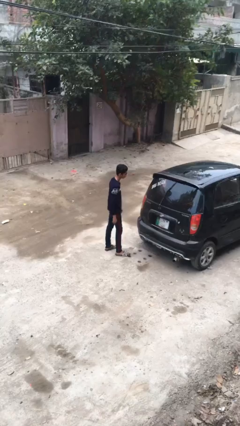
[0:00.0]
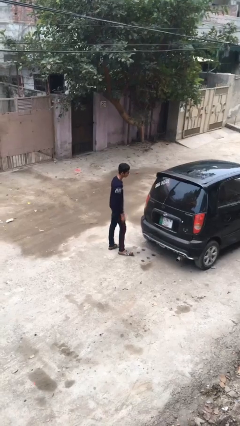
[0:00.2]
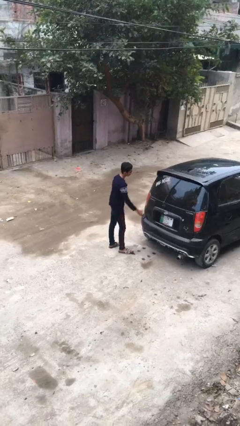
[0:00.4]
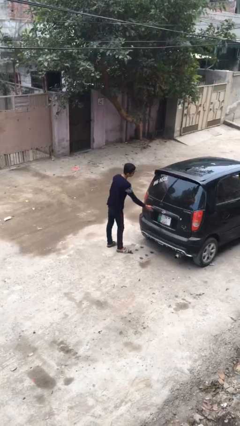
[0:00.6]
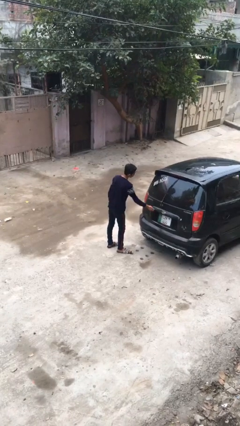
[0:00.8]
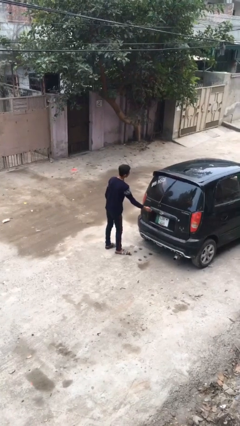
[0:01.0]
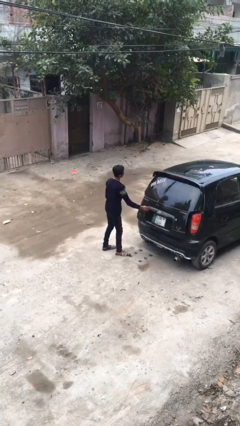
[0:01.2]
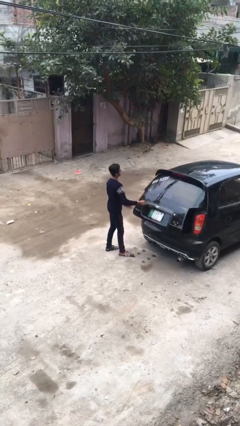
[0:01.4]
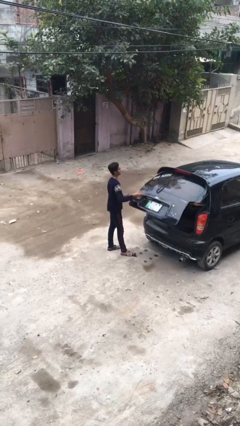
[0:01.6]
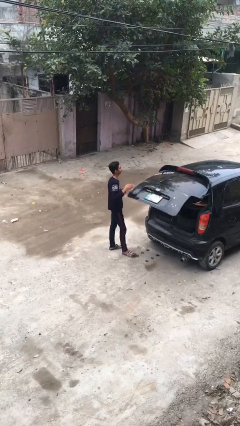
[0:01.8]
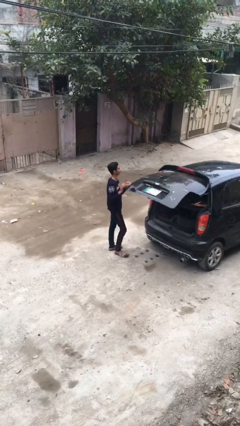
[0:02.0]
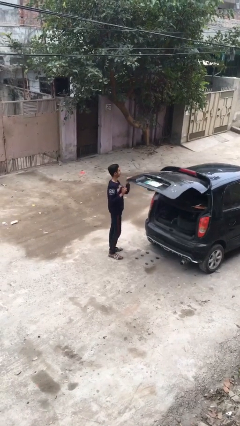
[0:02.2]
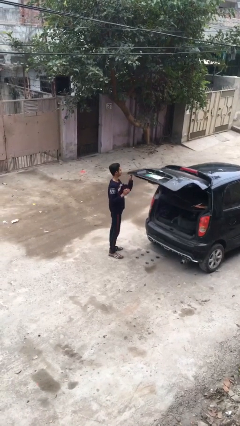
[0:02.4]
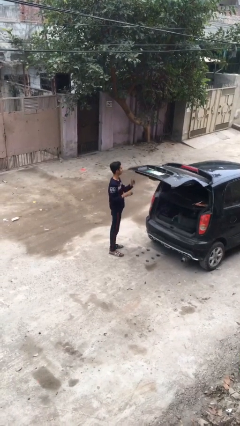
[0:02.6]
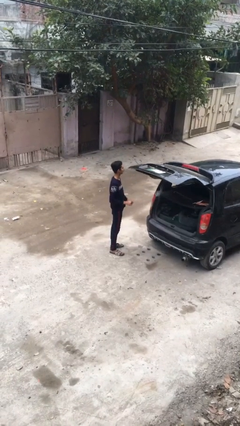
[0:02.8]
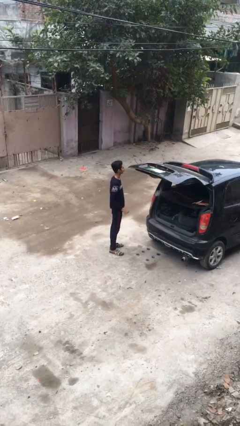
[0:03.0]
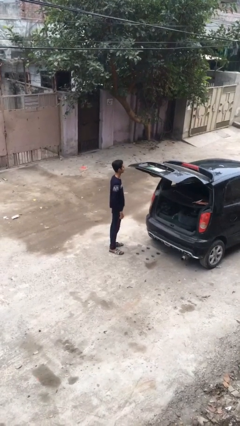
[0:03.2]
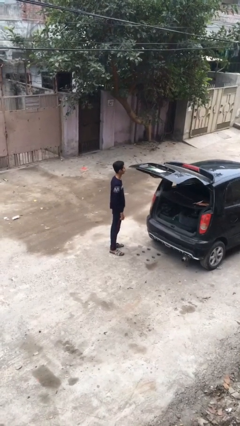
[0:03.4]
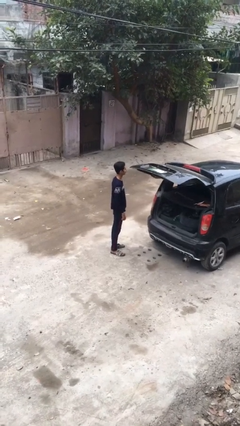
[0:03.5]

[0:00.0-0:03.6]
person opens car trunk

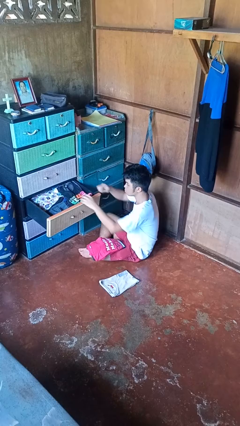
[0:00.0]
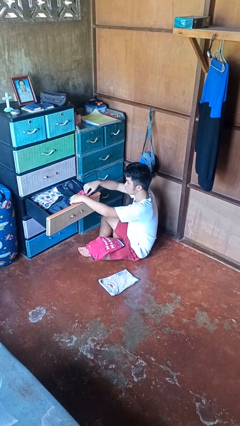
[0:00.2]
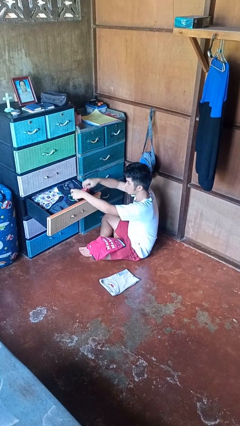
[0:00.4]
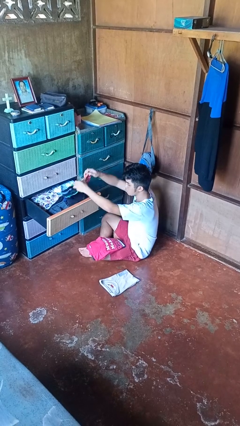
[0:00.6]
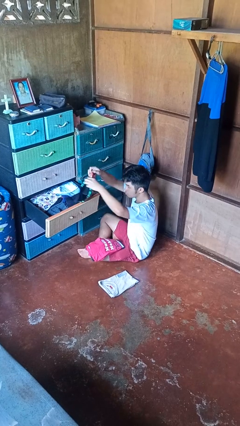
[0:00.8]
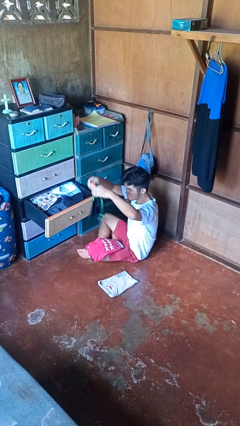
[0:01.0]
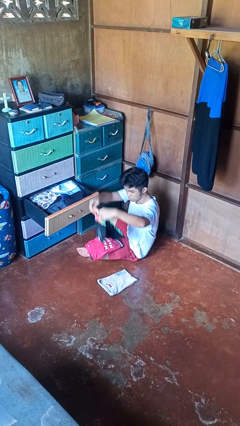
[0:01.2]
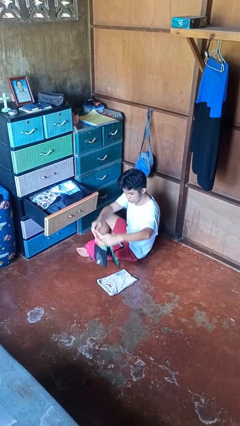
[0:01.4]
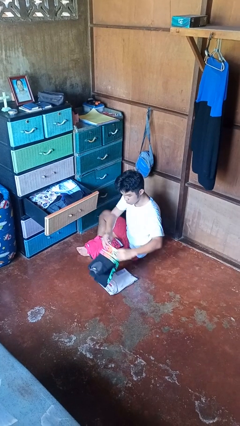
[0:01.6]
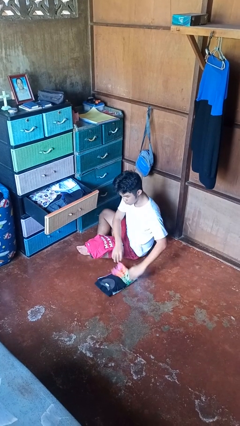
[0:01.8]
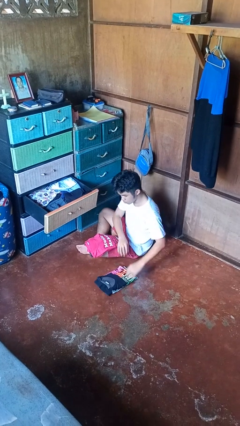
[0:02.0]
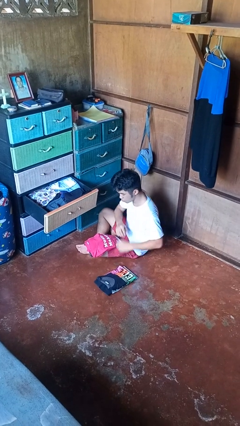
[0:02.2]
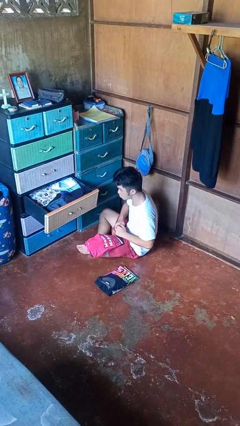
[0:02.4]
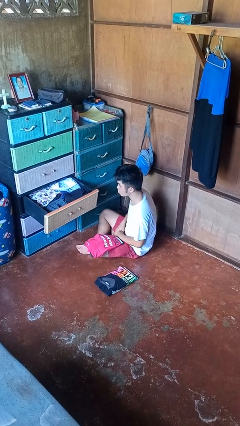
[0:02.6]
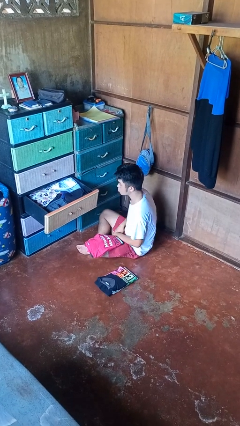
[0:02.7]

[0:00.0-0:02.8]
person takes clothes from dresser

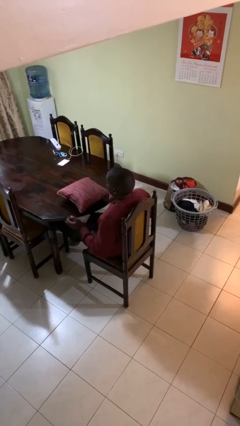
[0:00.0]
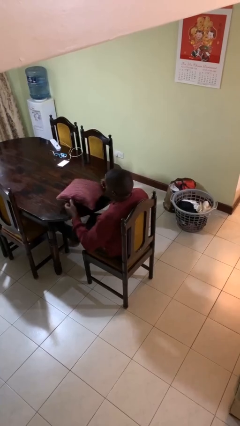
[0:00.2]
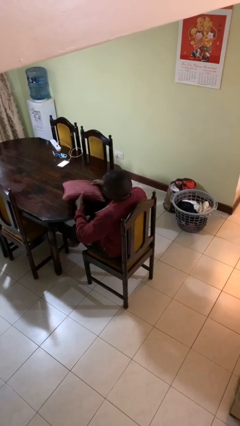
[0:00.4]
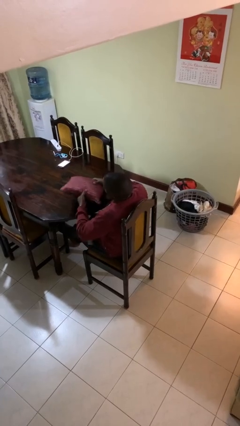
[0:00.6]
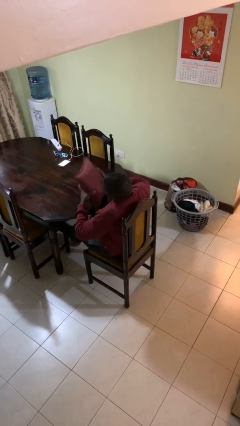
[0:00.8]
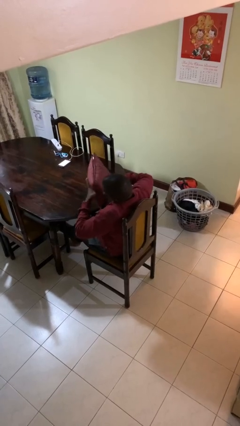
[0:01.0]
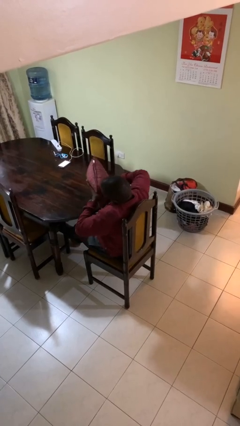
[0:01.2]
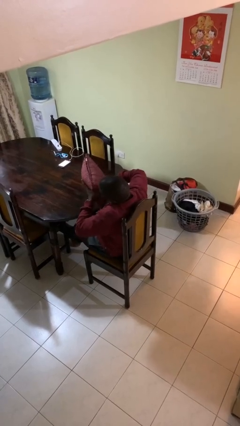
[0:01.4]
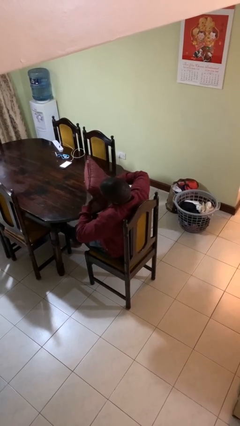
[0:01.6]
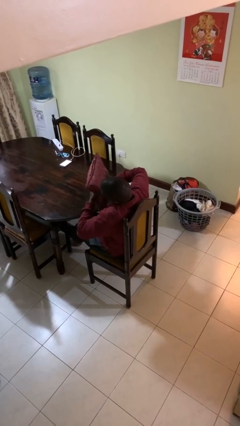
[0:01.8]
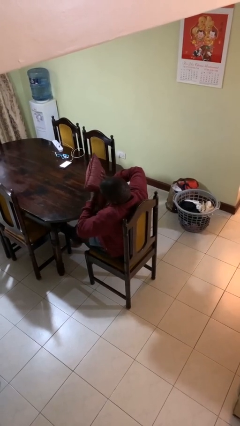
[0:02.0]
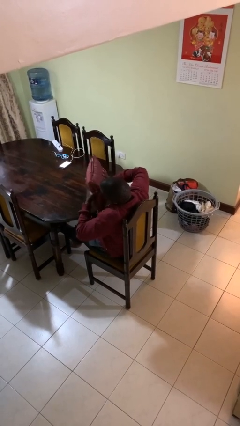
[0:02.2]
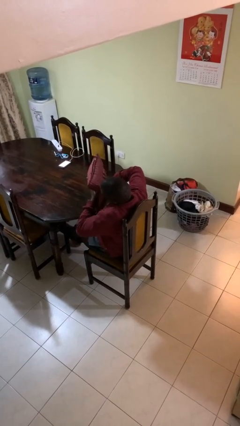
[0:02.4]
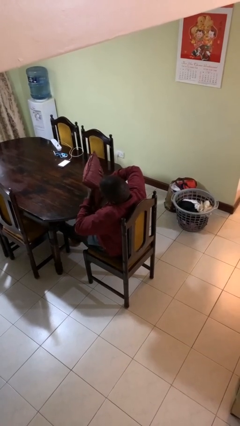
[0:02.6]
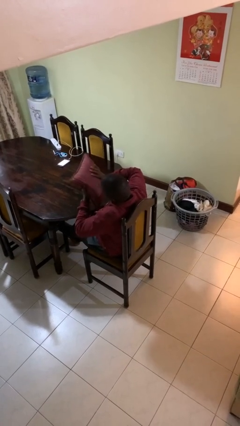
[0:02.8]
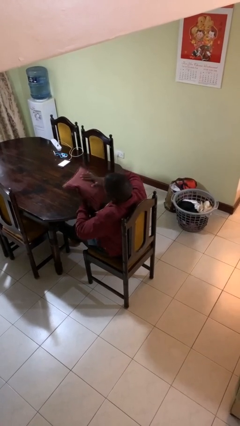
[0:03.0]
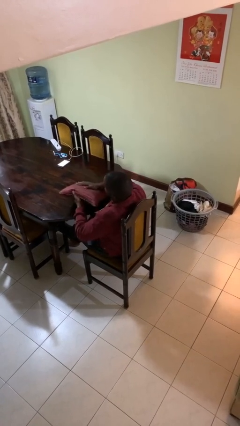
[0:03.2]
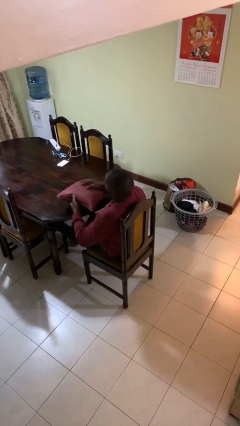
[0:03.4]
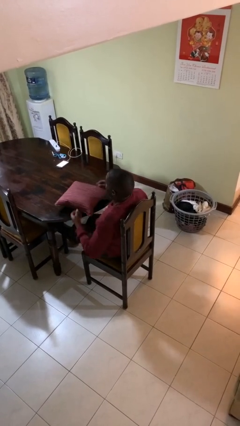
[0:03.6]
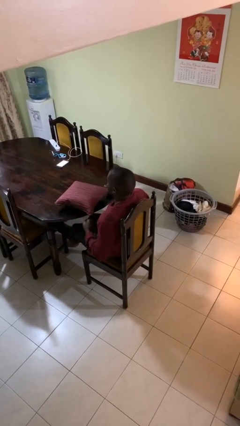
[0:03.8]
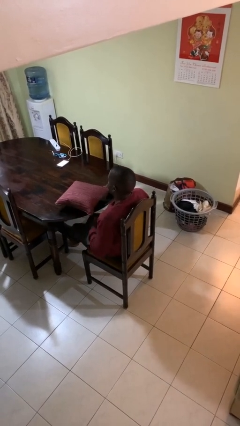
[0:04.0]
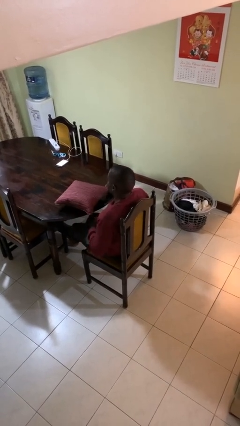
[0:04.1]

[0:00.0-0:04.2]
person squeezes object

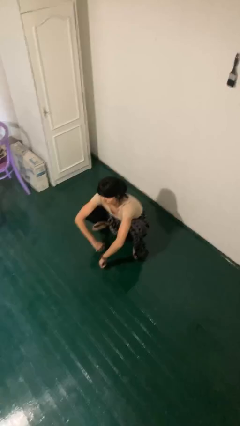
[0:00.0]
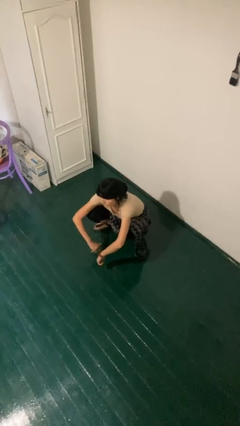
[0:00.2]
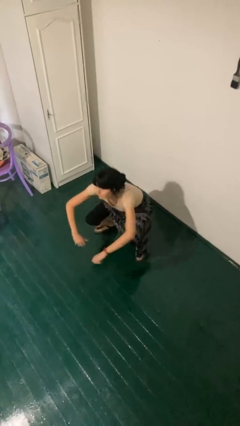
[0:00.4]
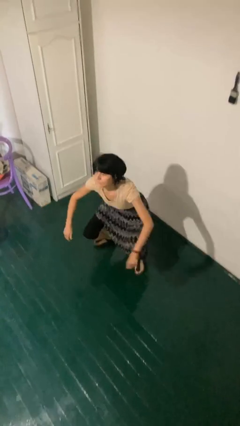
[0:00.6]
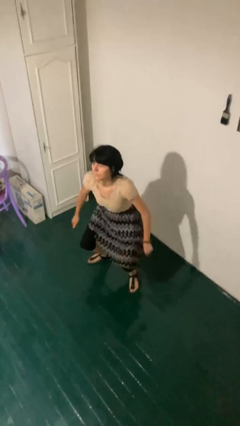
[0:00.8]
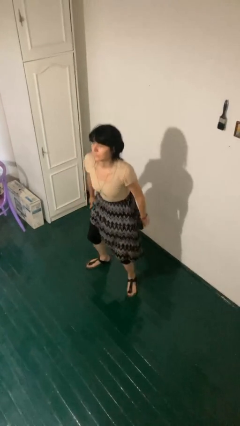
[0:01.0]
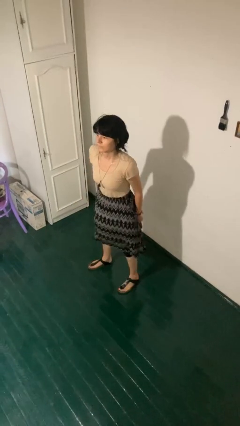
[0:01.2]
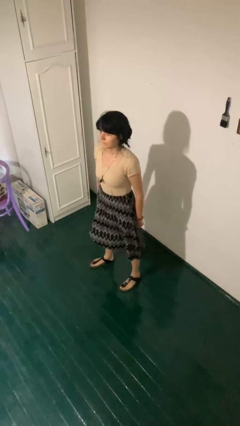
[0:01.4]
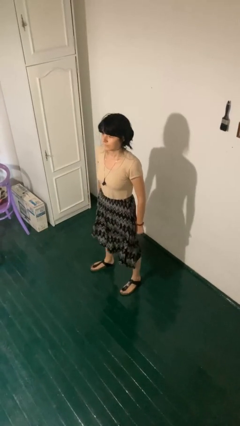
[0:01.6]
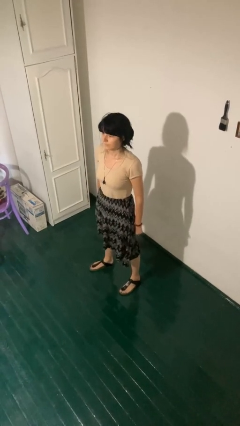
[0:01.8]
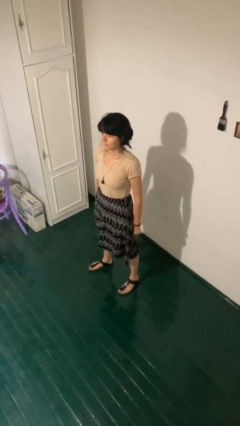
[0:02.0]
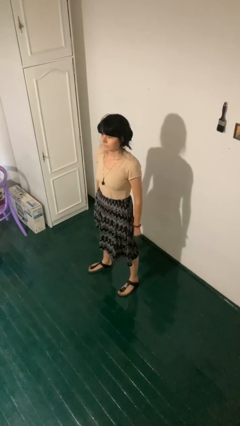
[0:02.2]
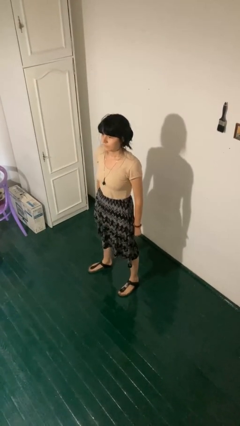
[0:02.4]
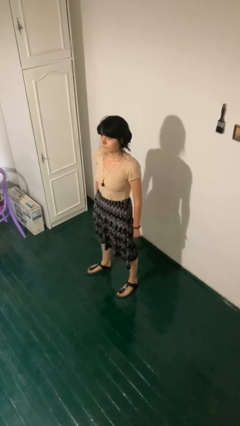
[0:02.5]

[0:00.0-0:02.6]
person stands up

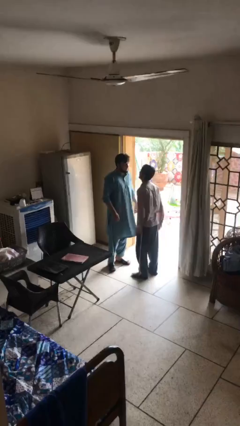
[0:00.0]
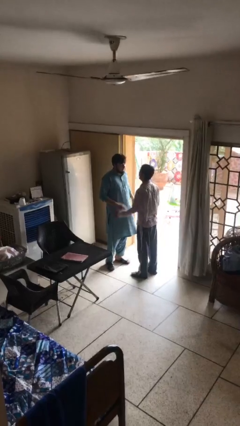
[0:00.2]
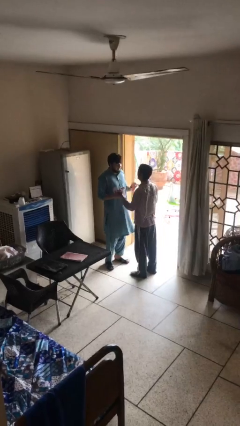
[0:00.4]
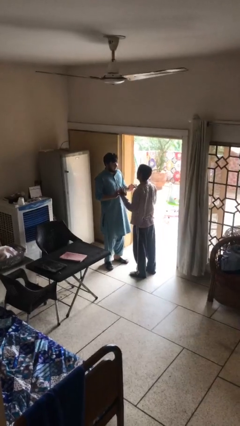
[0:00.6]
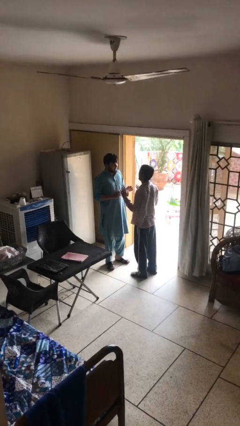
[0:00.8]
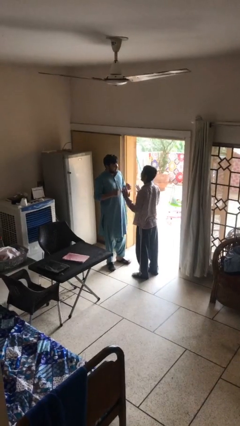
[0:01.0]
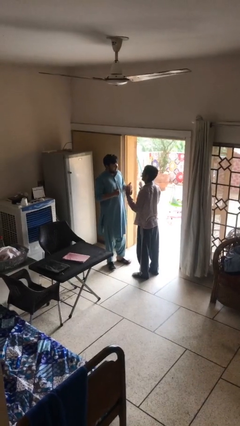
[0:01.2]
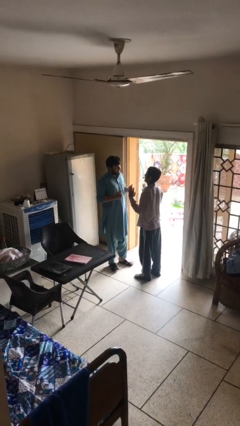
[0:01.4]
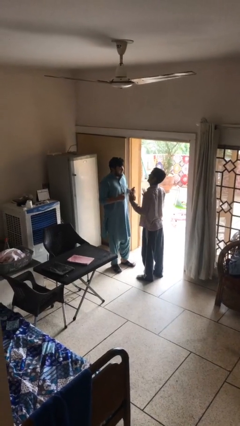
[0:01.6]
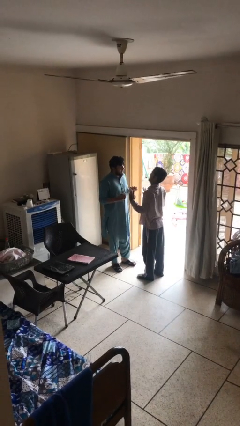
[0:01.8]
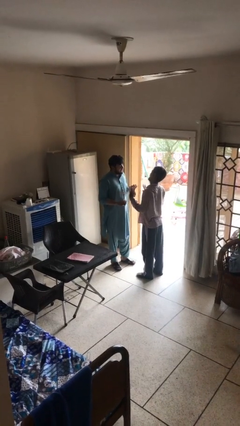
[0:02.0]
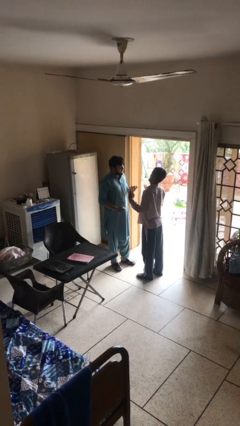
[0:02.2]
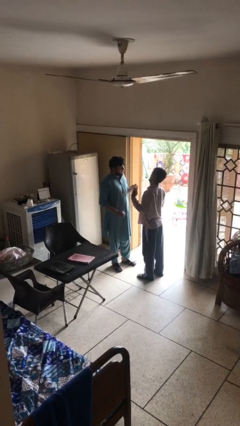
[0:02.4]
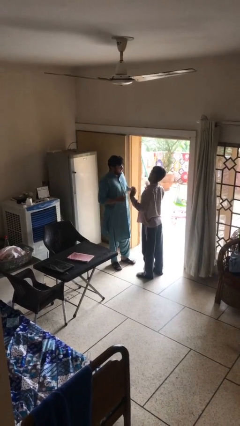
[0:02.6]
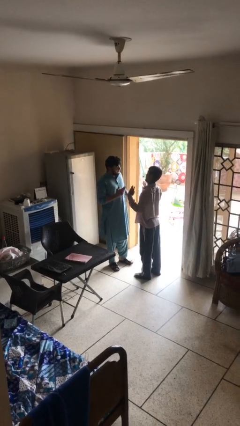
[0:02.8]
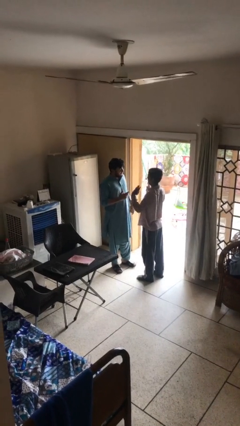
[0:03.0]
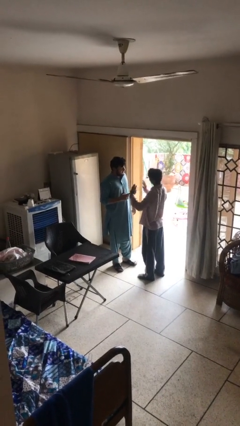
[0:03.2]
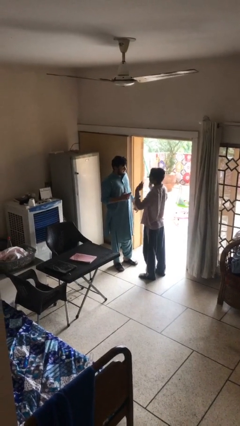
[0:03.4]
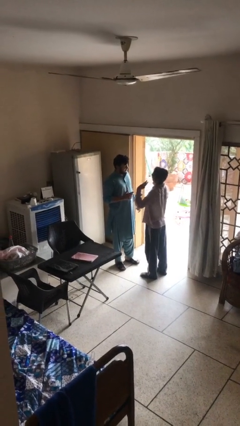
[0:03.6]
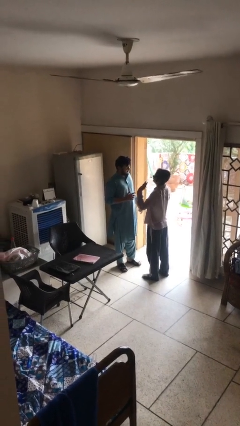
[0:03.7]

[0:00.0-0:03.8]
person talks to person

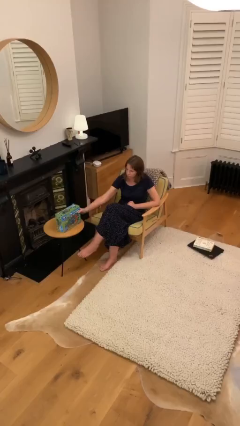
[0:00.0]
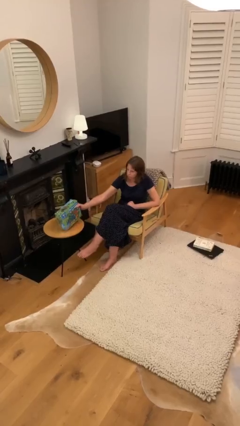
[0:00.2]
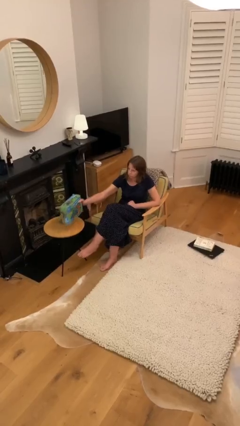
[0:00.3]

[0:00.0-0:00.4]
person picks up object from table
